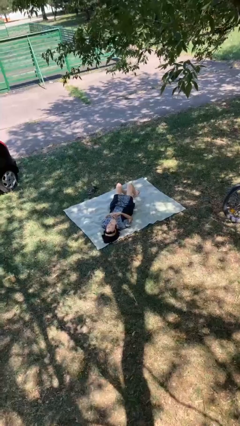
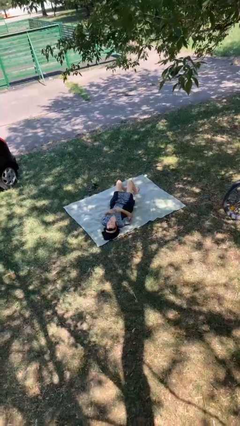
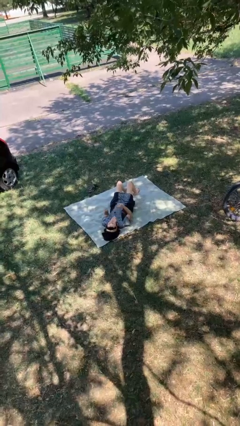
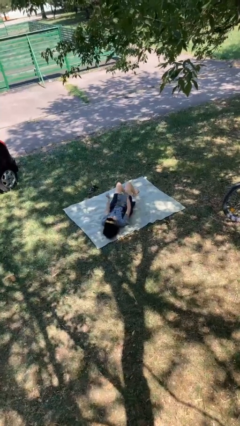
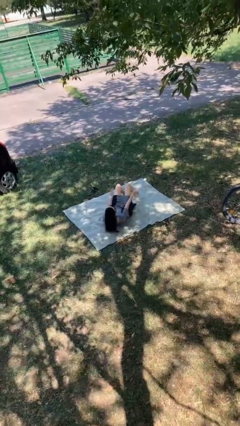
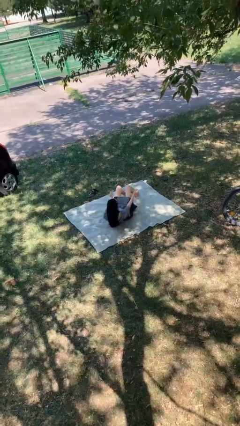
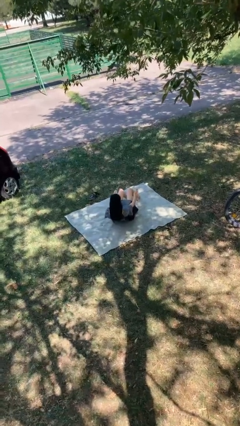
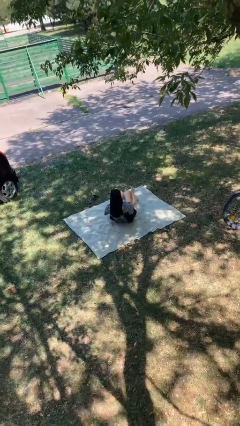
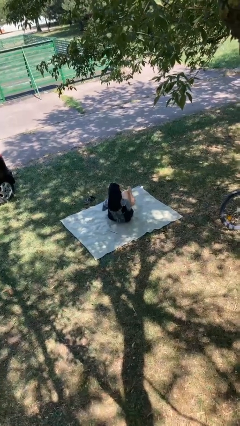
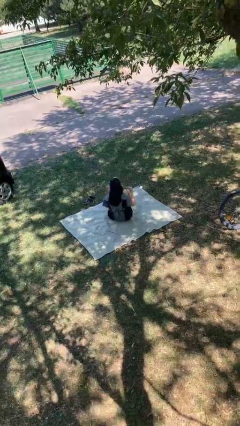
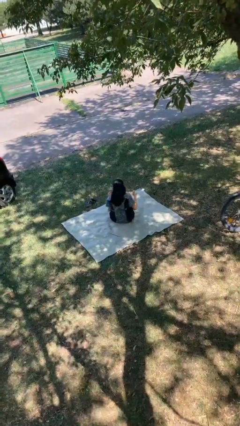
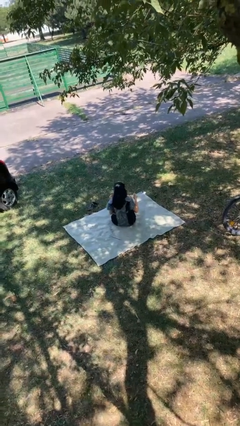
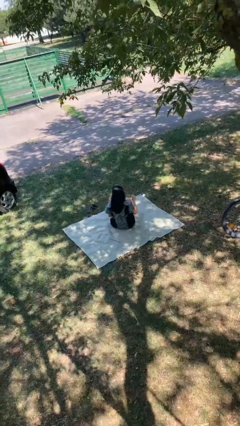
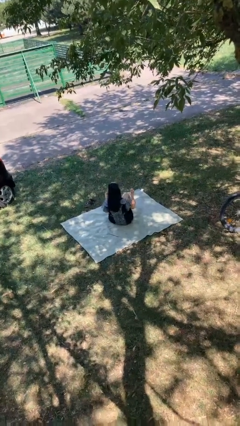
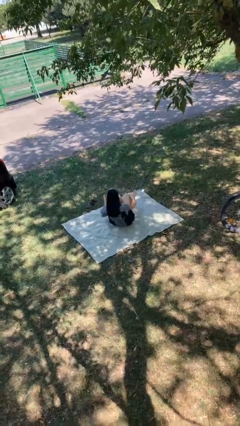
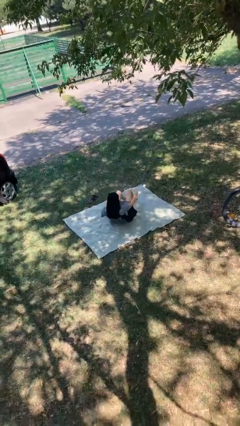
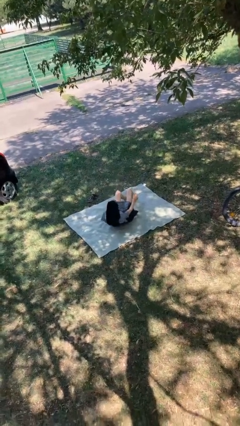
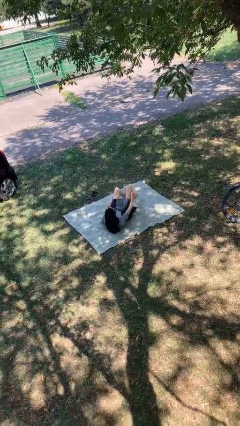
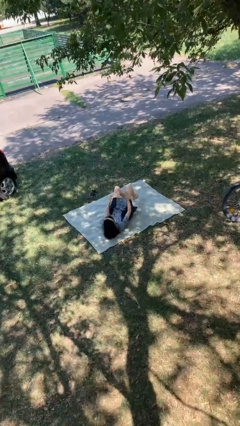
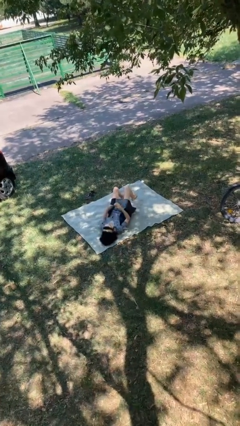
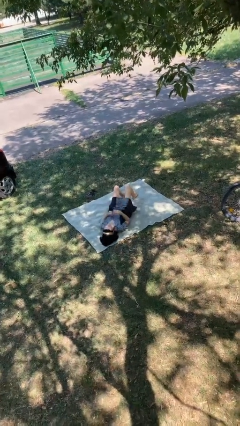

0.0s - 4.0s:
person exercises with situp

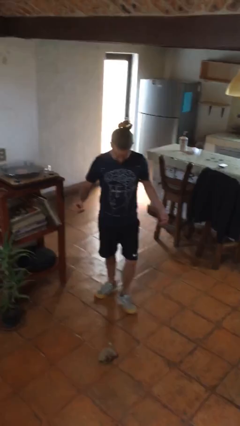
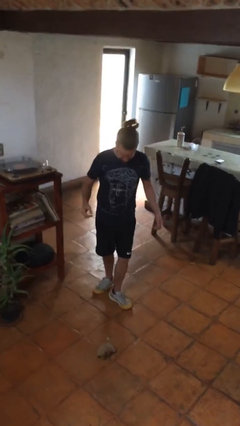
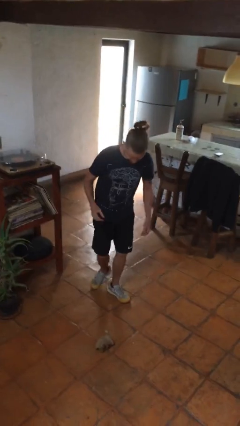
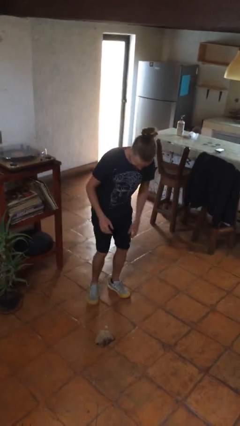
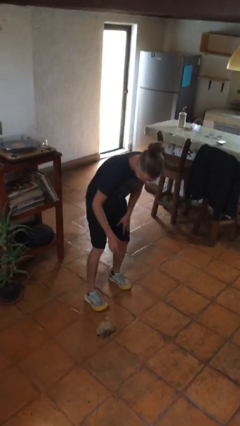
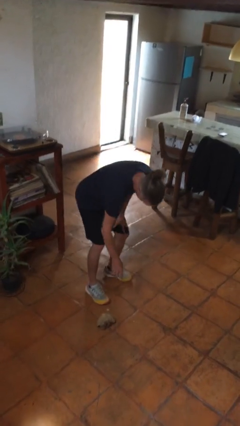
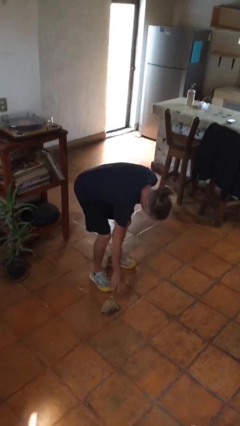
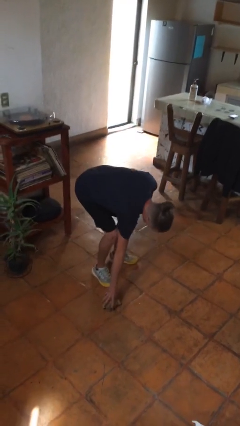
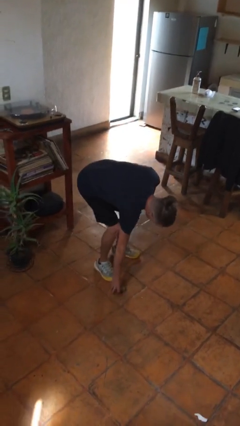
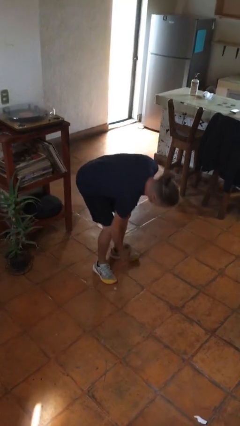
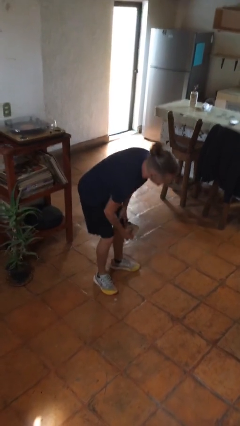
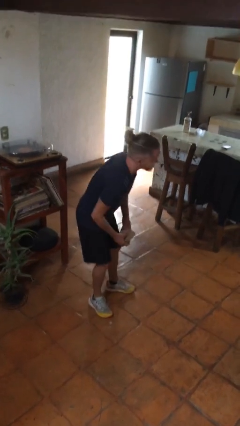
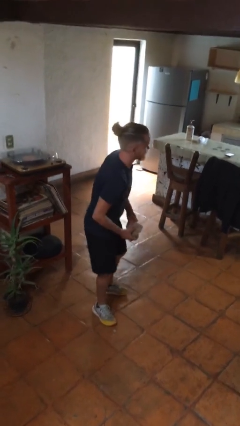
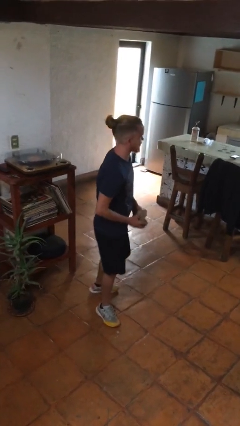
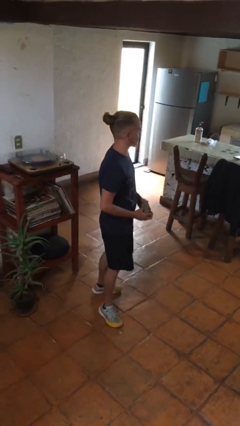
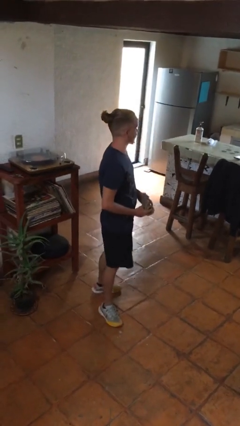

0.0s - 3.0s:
person picks up object from floor

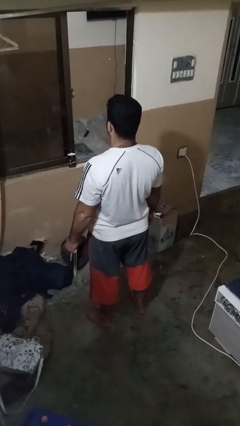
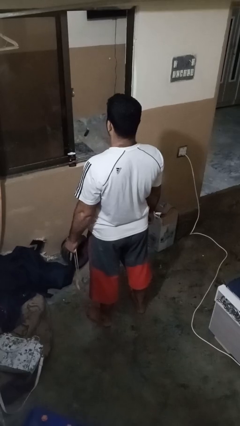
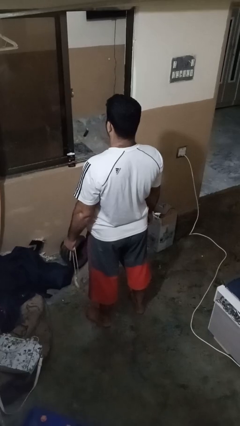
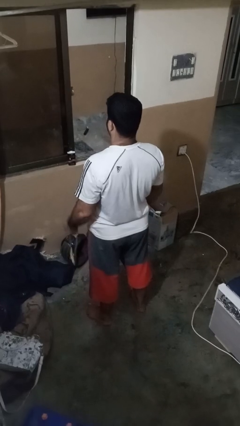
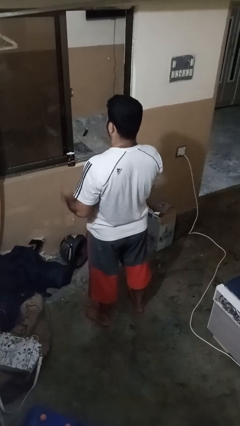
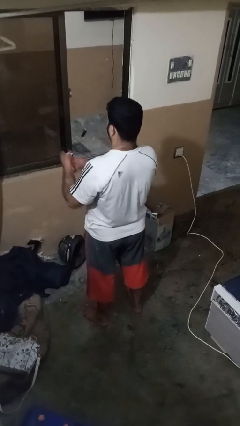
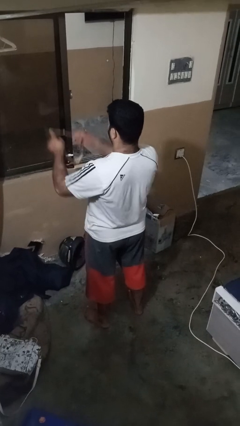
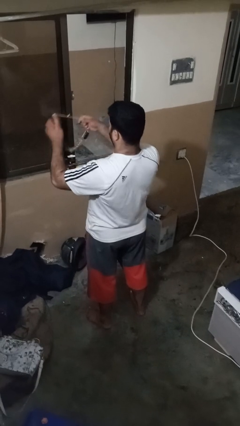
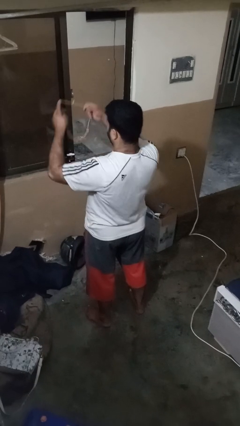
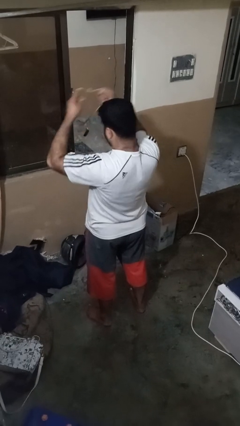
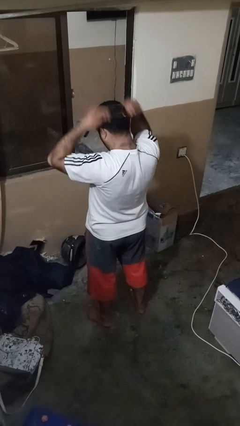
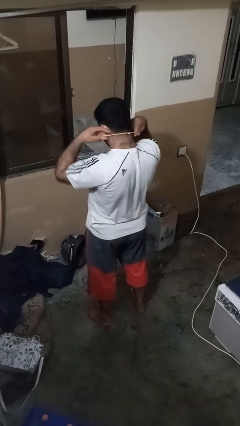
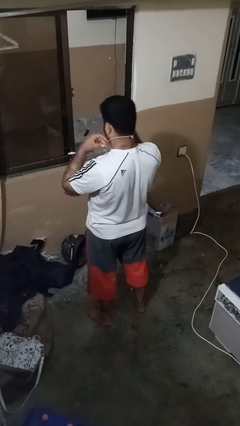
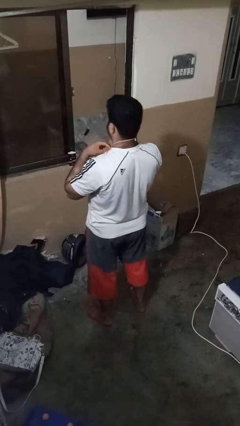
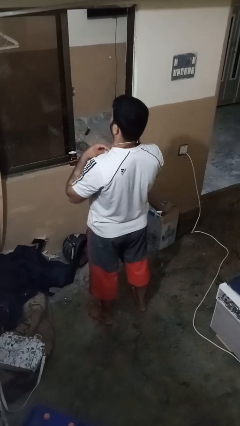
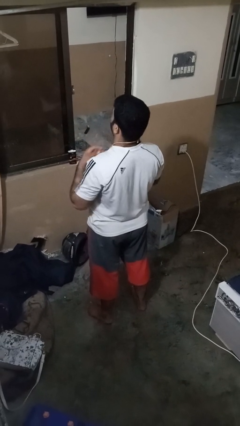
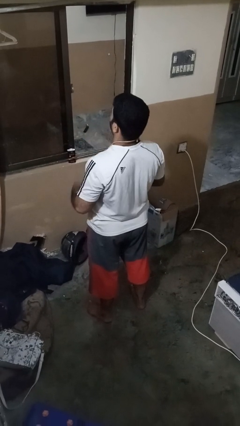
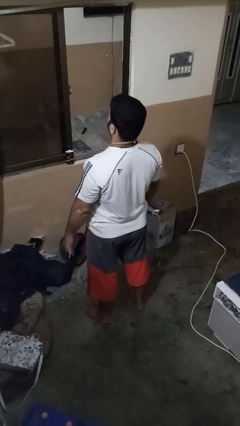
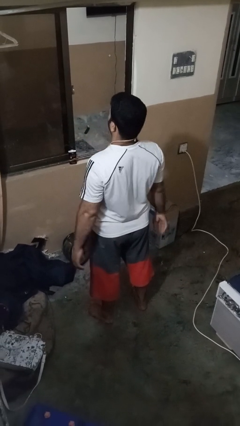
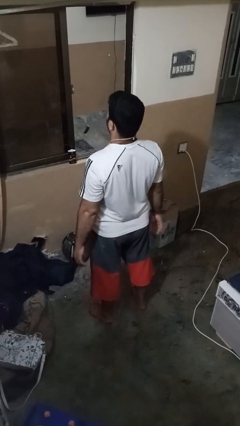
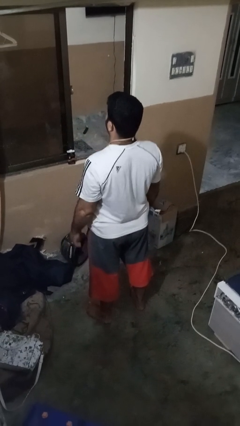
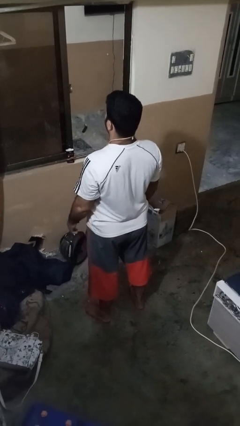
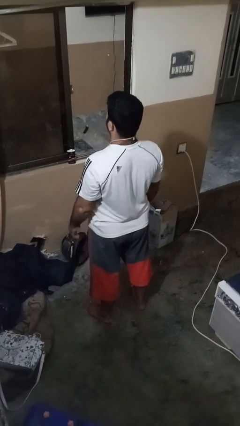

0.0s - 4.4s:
person puts on necklace

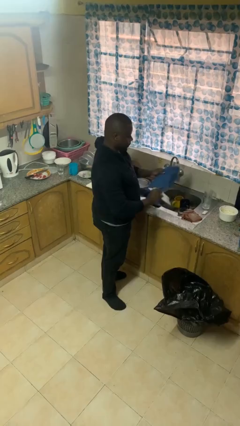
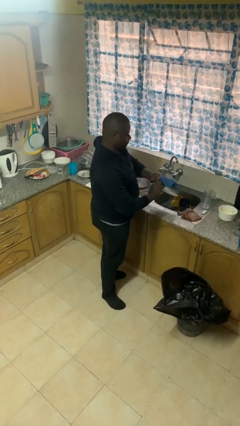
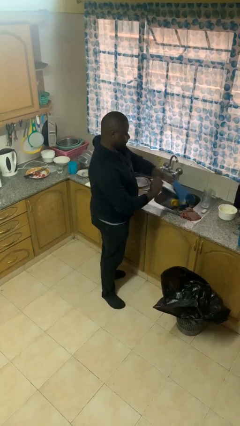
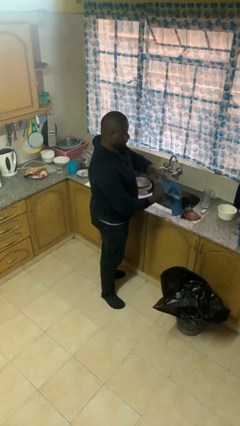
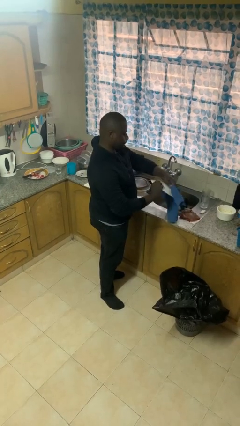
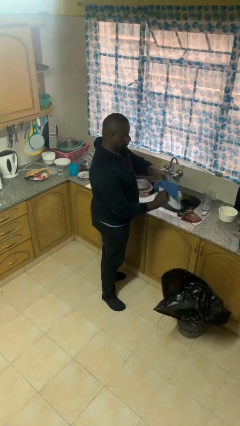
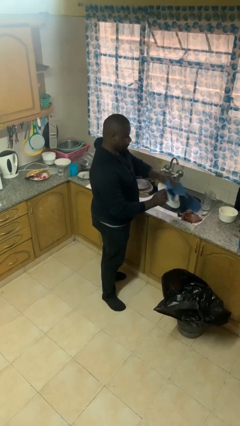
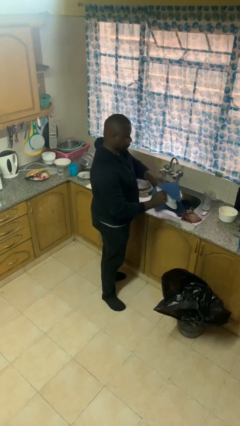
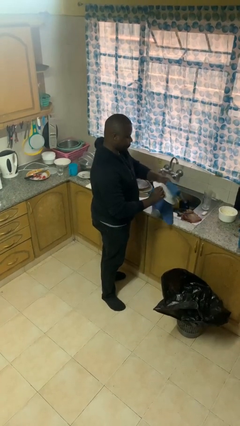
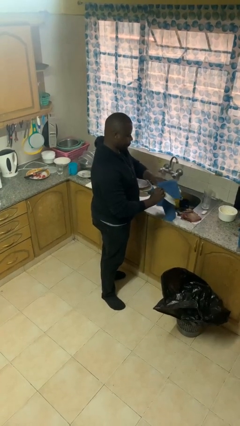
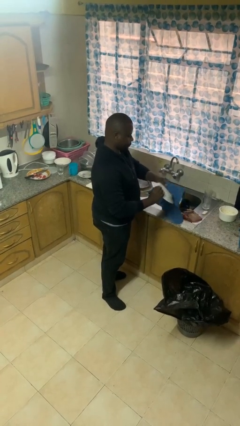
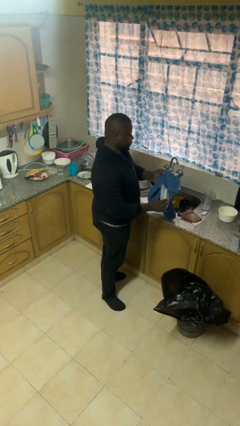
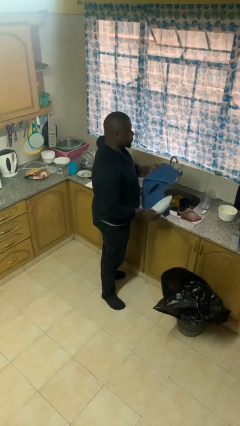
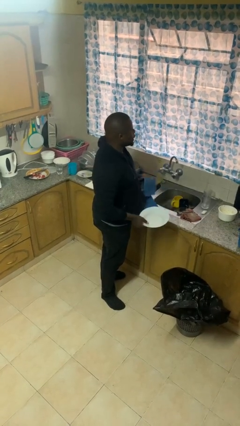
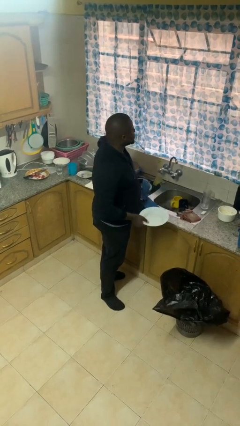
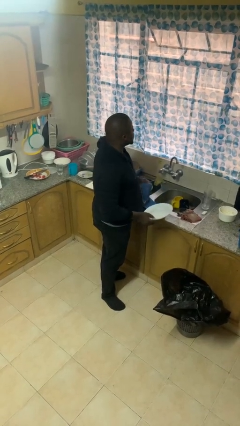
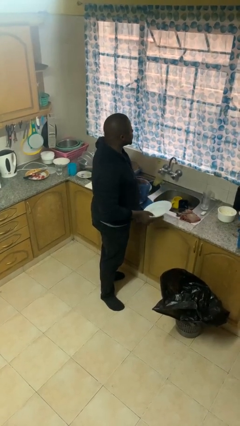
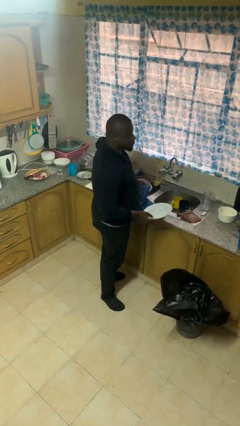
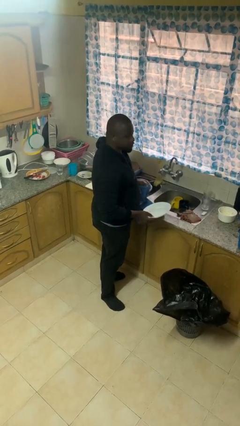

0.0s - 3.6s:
person dries dish

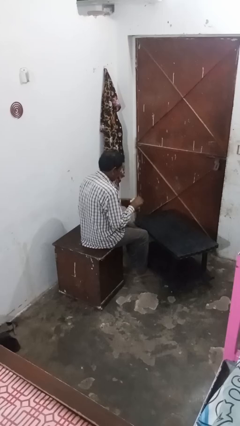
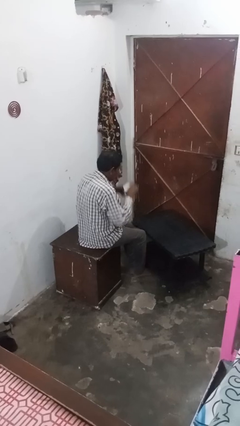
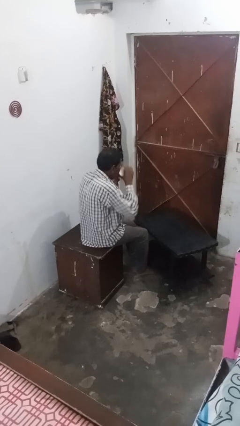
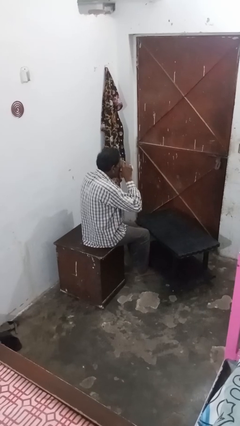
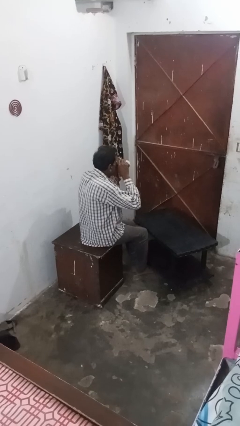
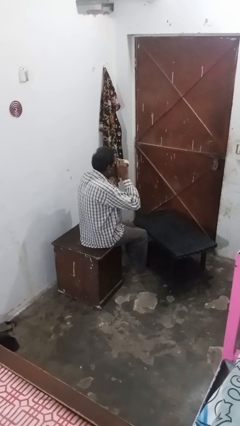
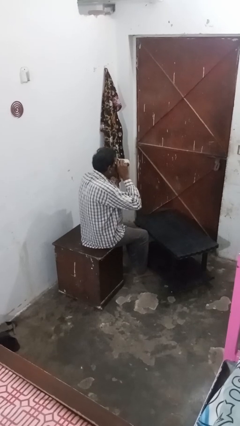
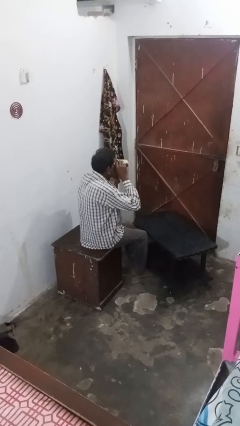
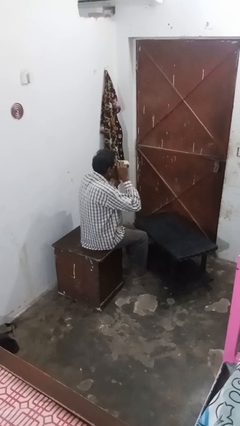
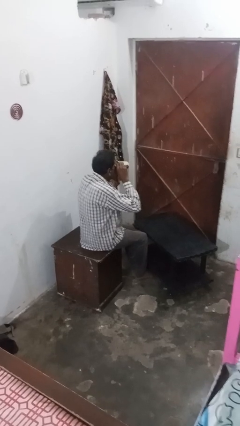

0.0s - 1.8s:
person drinks from mug

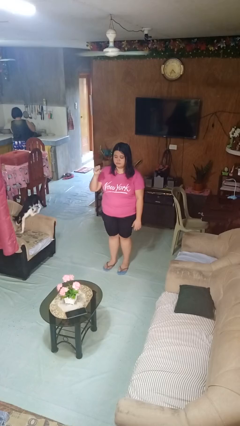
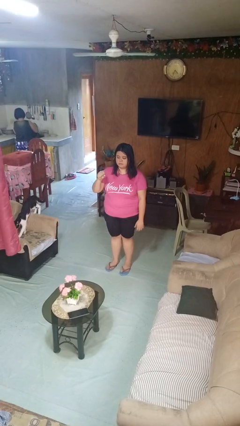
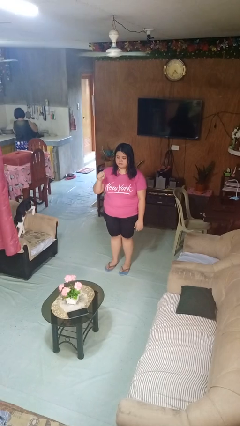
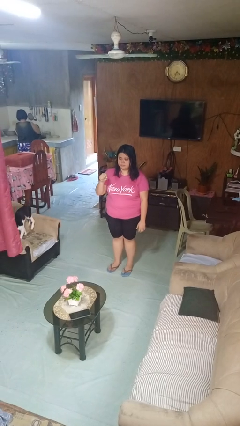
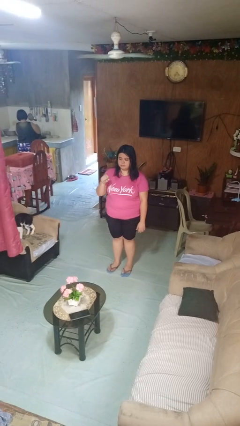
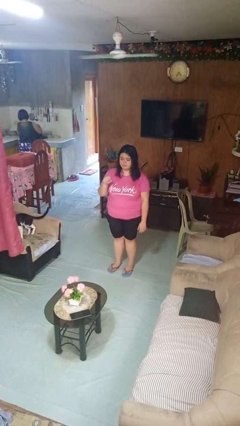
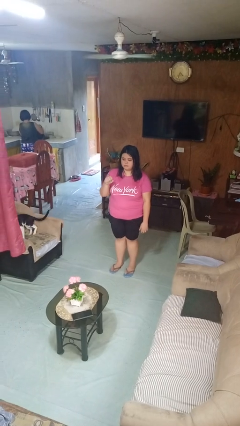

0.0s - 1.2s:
person gestures zoom out
